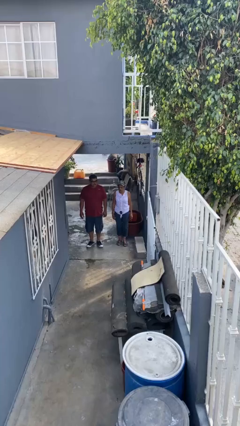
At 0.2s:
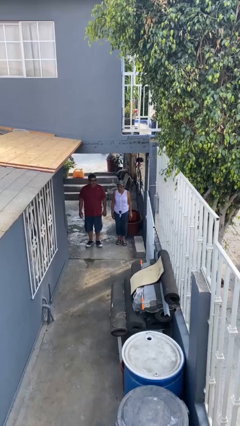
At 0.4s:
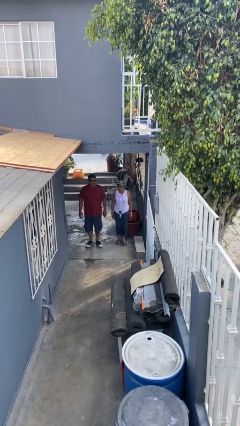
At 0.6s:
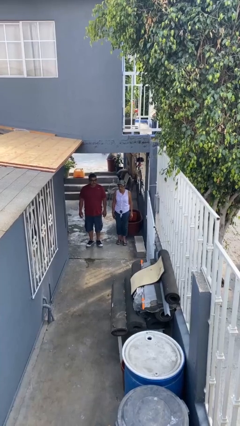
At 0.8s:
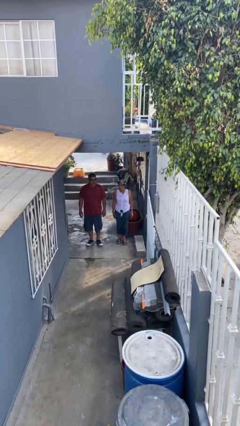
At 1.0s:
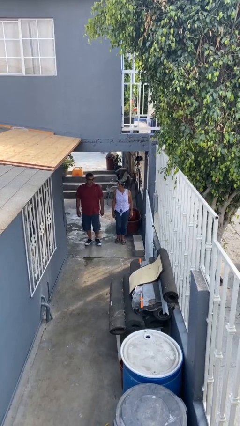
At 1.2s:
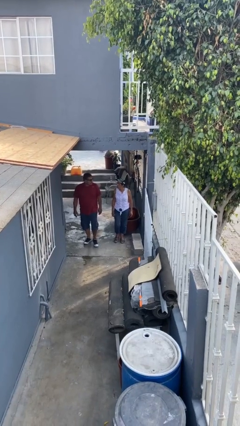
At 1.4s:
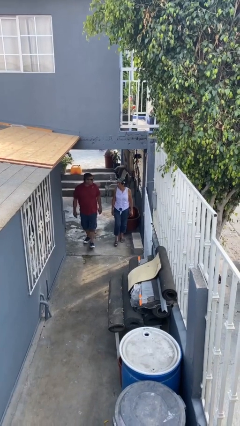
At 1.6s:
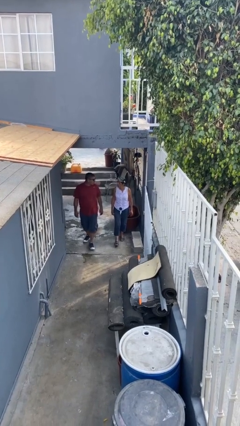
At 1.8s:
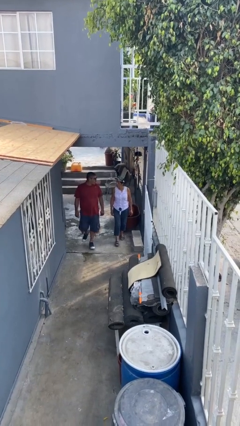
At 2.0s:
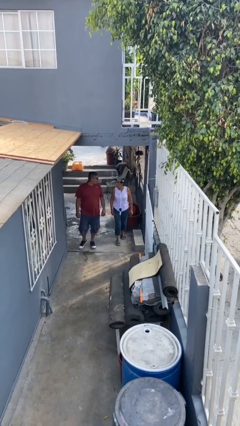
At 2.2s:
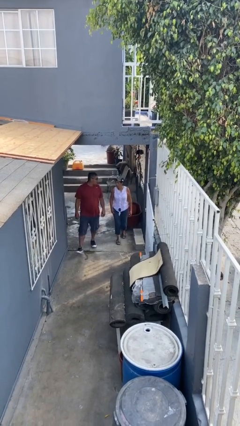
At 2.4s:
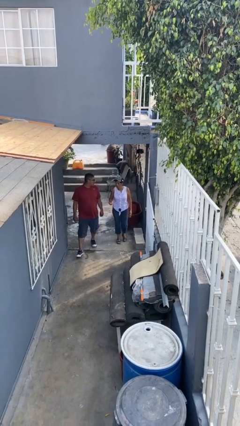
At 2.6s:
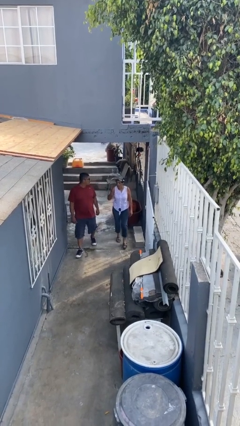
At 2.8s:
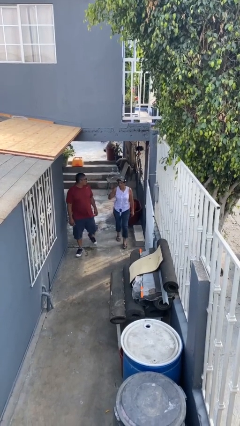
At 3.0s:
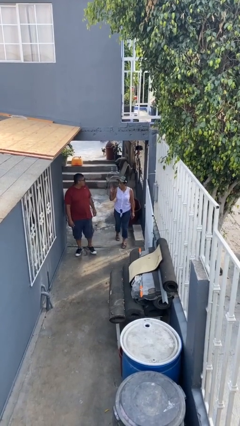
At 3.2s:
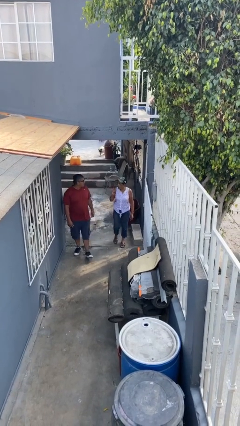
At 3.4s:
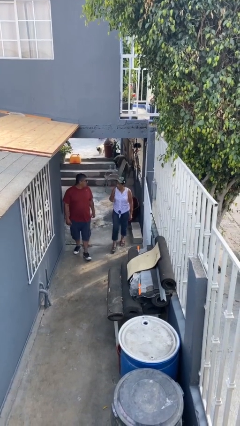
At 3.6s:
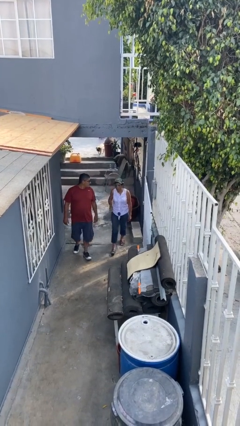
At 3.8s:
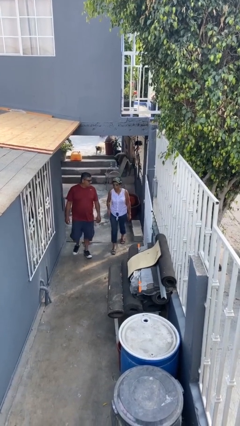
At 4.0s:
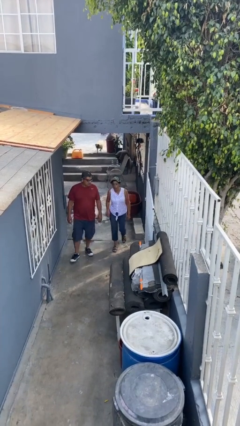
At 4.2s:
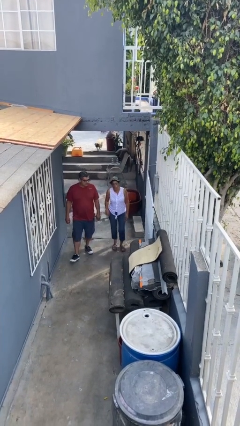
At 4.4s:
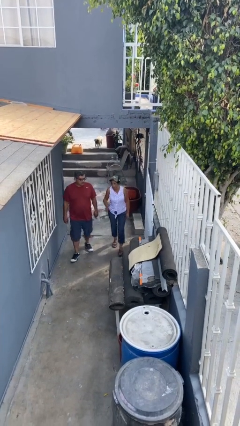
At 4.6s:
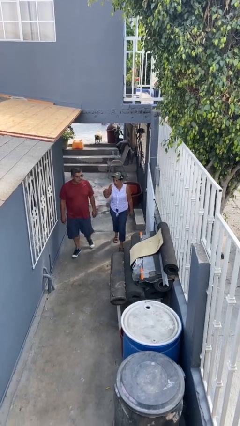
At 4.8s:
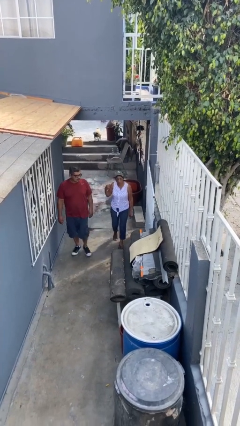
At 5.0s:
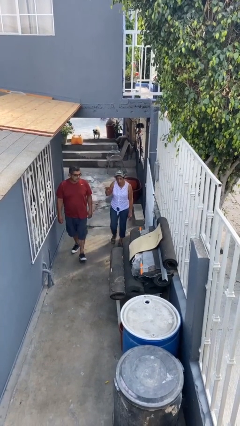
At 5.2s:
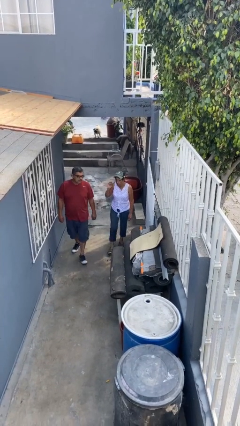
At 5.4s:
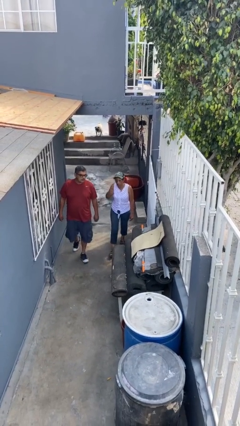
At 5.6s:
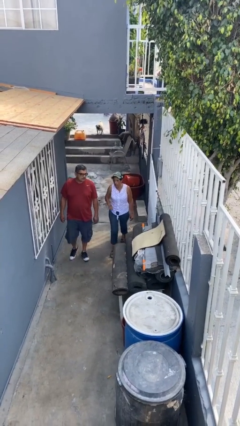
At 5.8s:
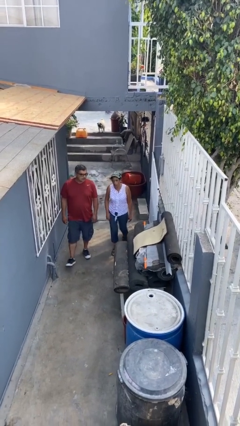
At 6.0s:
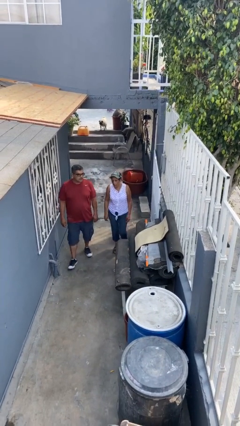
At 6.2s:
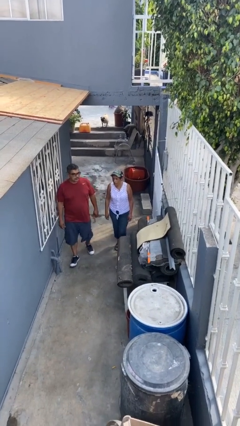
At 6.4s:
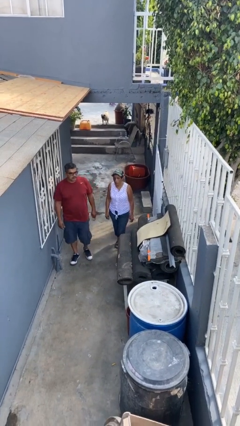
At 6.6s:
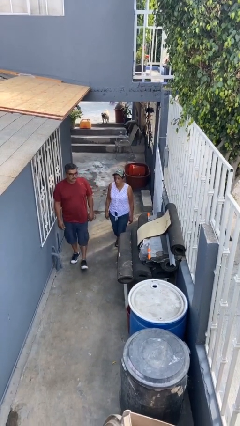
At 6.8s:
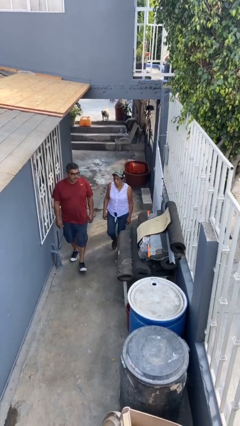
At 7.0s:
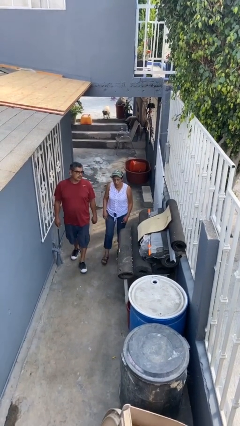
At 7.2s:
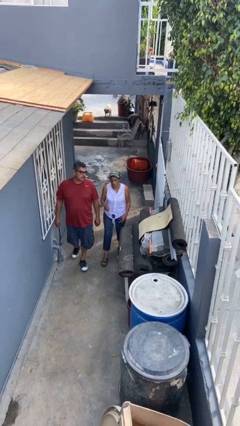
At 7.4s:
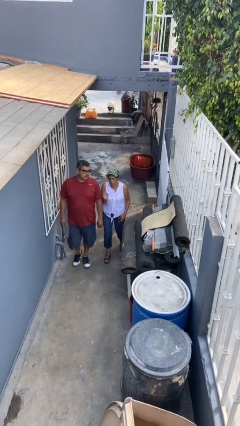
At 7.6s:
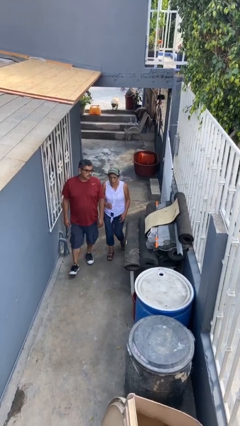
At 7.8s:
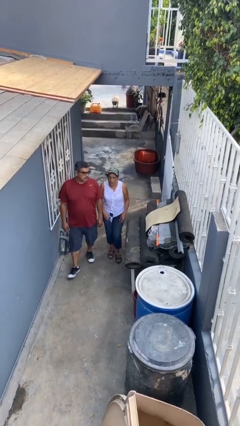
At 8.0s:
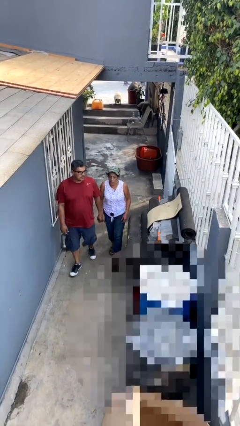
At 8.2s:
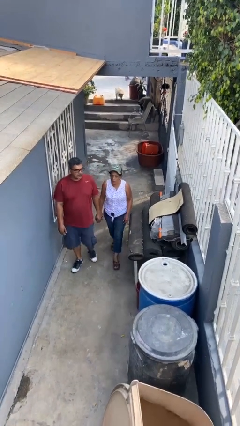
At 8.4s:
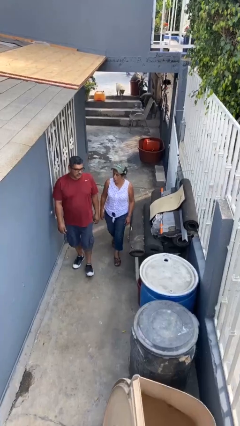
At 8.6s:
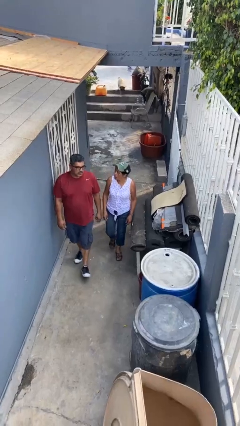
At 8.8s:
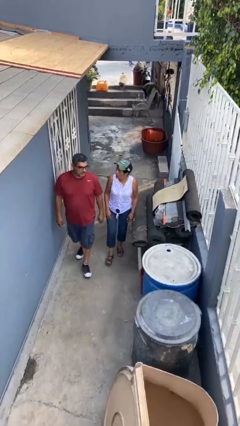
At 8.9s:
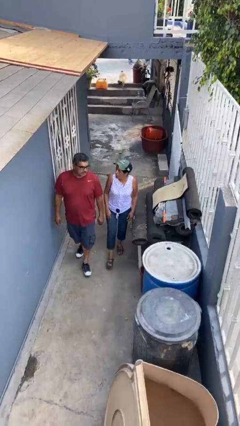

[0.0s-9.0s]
person talks to person

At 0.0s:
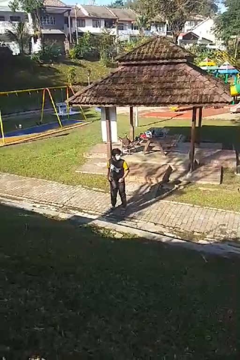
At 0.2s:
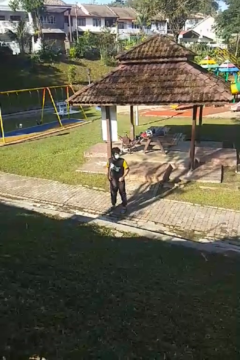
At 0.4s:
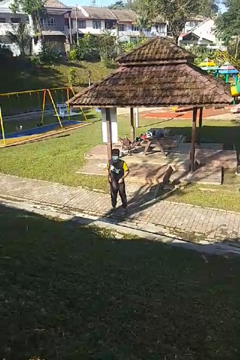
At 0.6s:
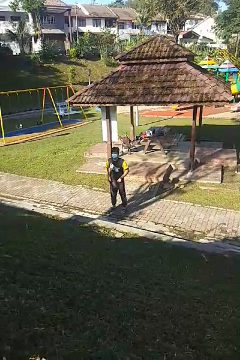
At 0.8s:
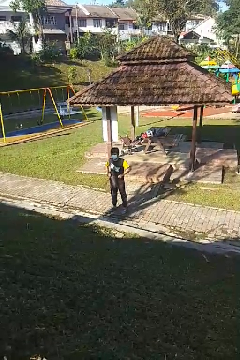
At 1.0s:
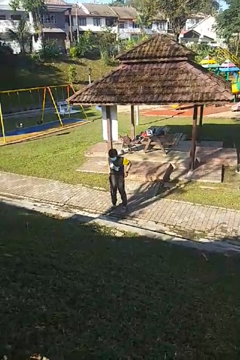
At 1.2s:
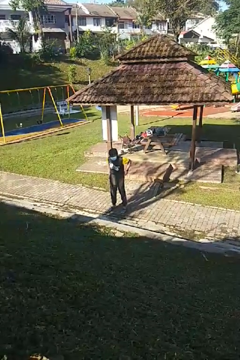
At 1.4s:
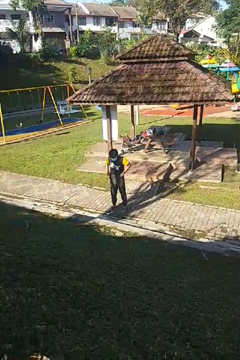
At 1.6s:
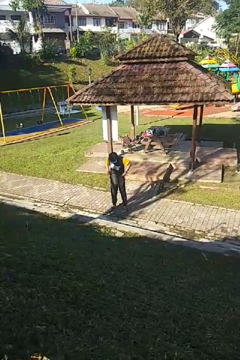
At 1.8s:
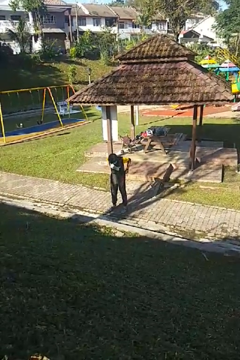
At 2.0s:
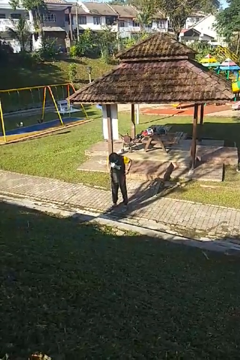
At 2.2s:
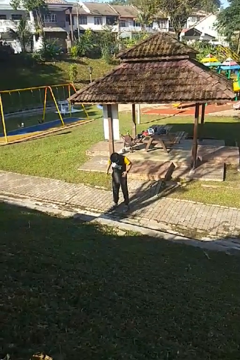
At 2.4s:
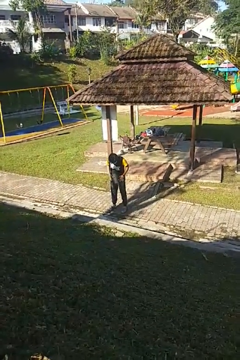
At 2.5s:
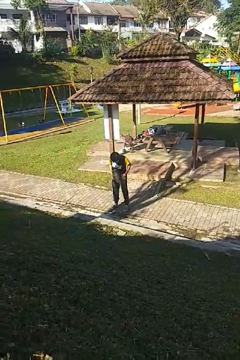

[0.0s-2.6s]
person hikes up pants

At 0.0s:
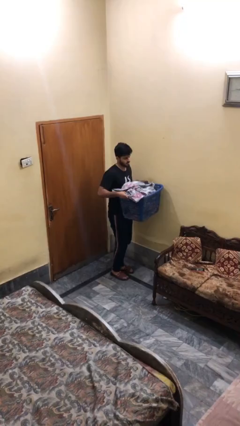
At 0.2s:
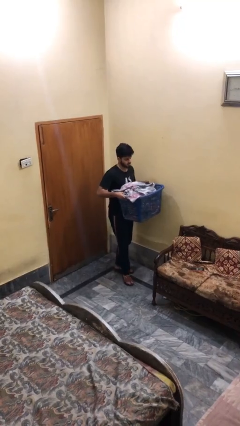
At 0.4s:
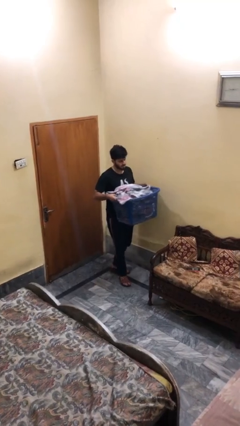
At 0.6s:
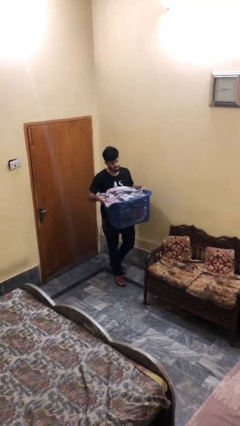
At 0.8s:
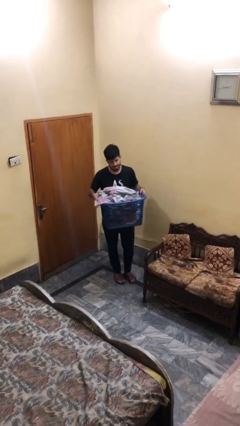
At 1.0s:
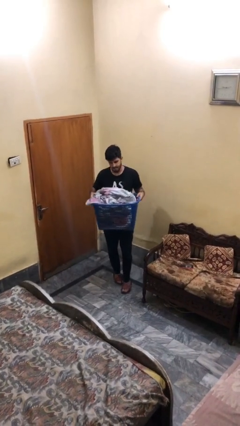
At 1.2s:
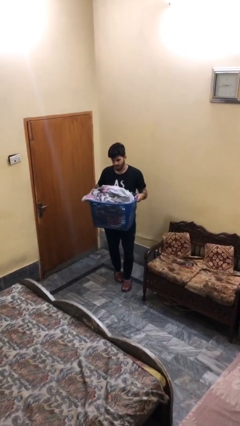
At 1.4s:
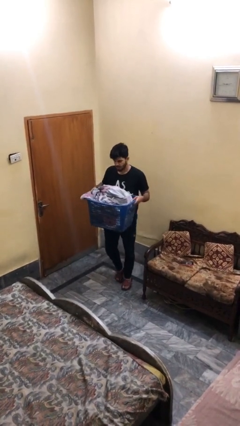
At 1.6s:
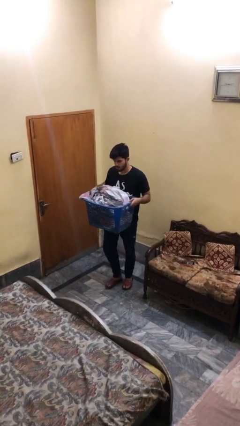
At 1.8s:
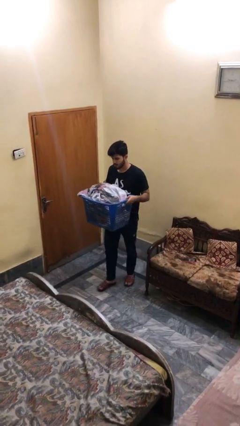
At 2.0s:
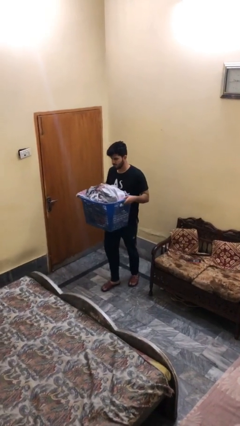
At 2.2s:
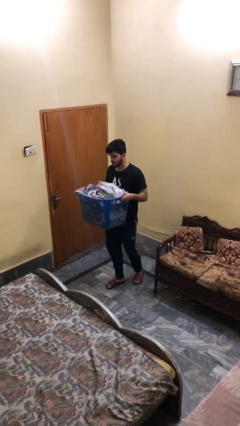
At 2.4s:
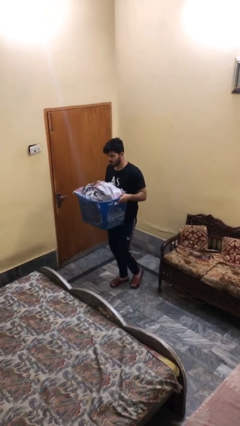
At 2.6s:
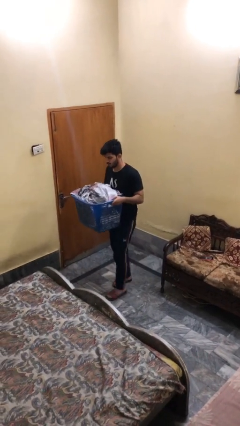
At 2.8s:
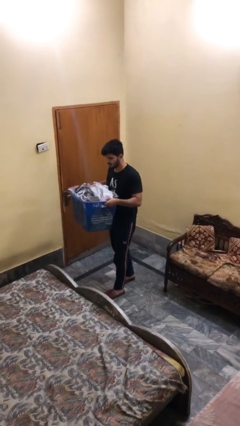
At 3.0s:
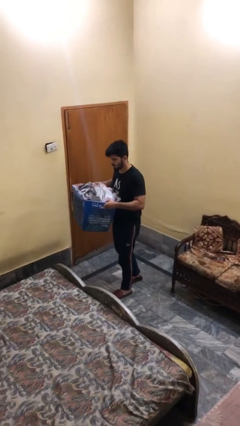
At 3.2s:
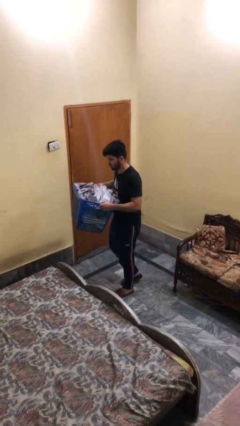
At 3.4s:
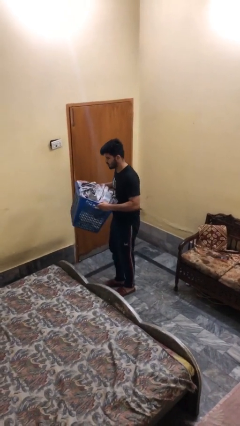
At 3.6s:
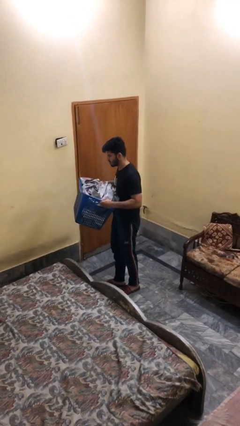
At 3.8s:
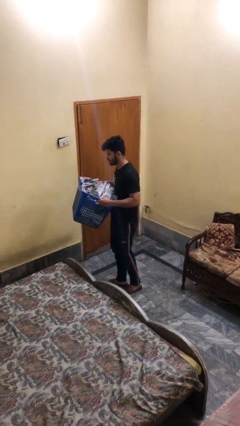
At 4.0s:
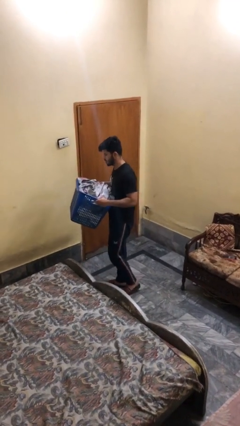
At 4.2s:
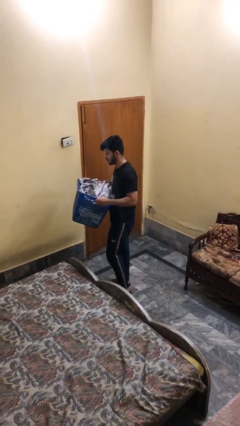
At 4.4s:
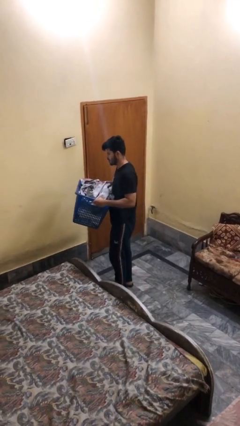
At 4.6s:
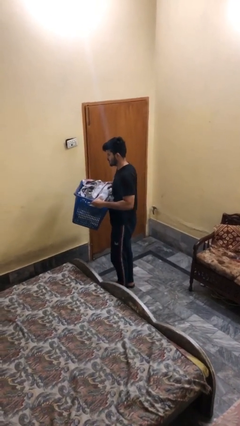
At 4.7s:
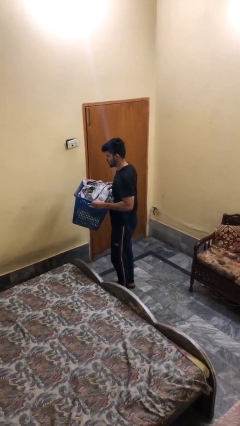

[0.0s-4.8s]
person carries laundry basket

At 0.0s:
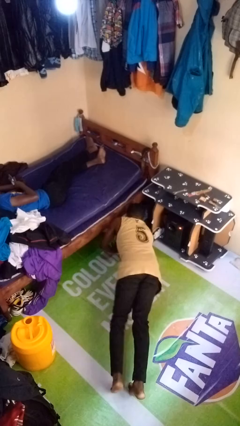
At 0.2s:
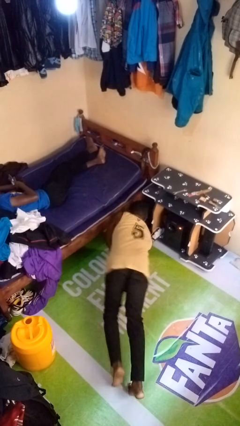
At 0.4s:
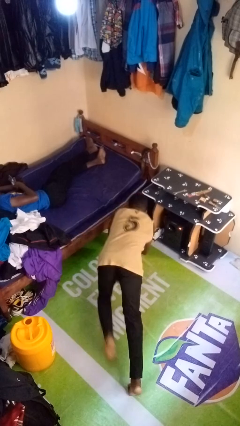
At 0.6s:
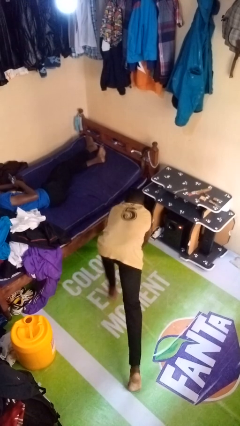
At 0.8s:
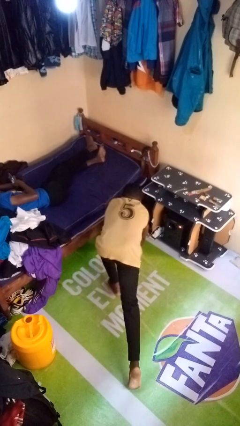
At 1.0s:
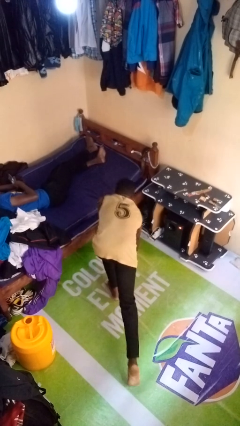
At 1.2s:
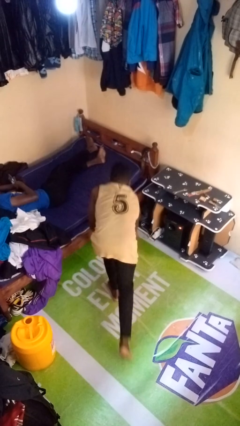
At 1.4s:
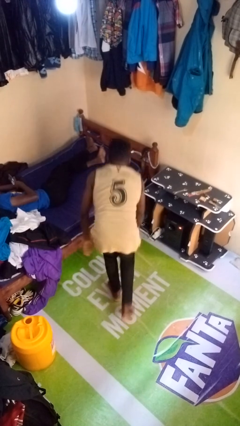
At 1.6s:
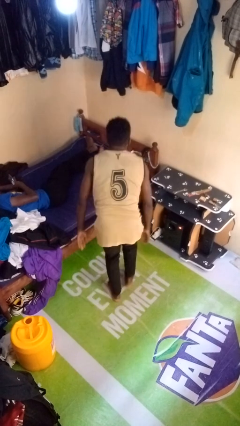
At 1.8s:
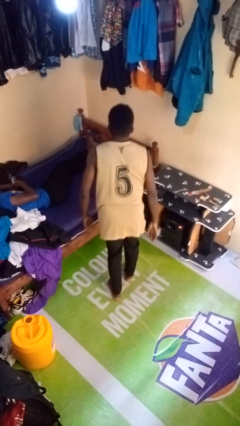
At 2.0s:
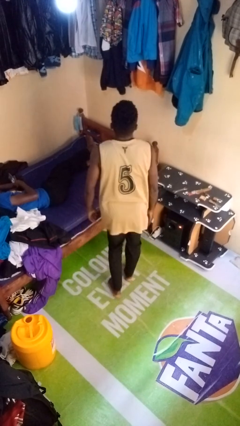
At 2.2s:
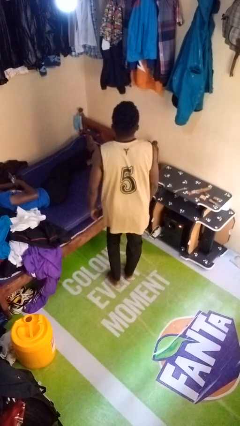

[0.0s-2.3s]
person stands up from floor
